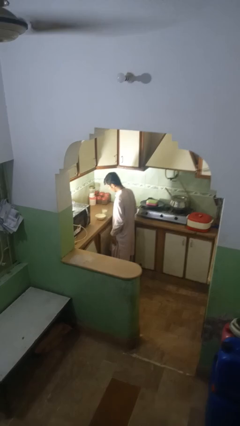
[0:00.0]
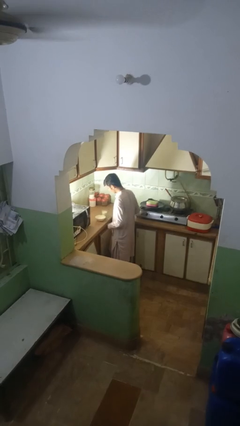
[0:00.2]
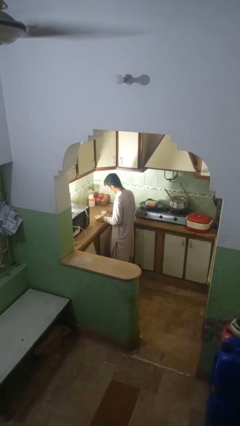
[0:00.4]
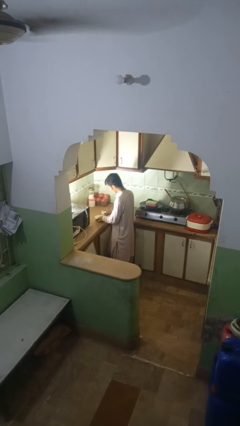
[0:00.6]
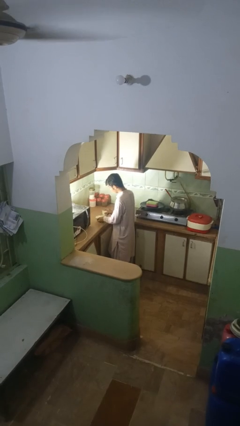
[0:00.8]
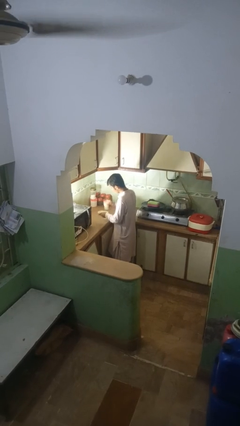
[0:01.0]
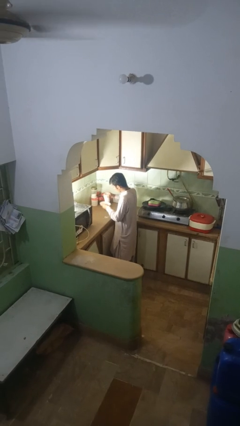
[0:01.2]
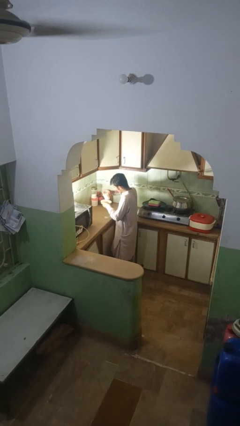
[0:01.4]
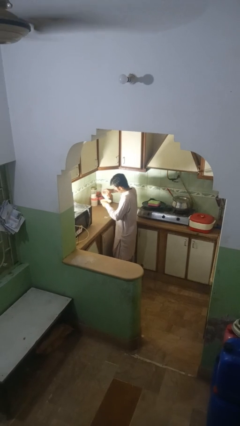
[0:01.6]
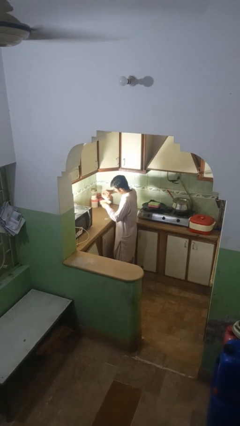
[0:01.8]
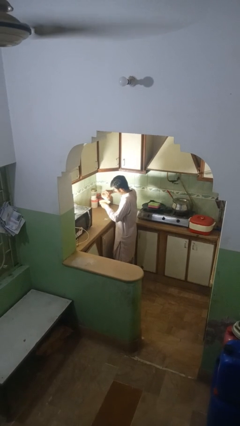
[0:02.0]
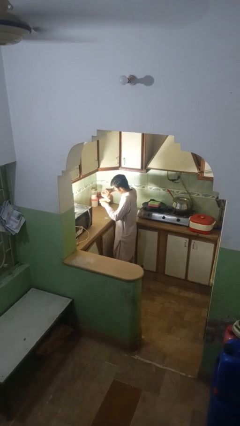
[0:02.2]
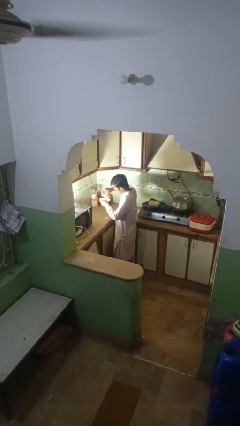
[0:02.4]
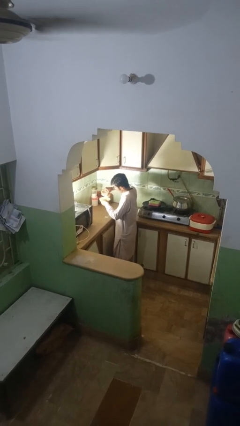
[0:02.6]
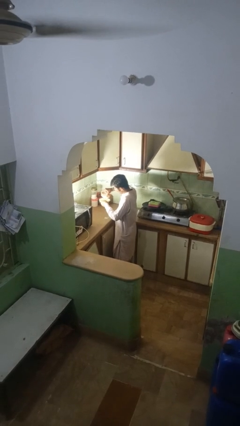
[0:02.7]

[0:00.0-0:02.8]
person pours into bowl

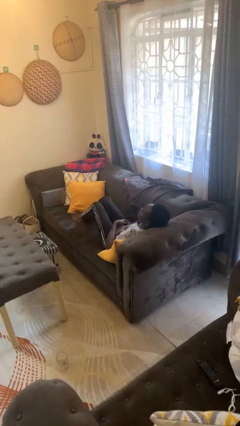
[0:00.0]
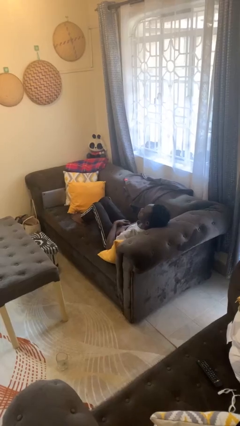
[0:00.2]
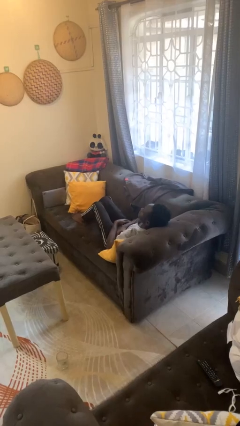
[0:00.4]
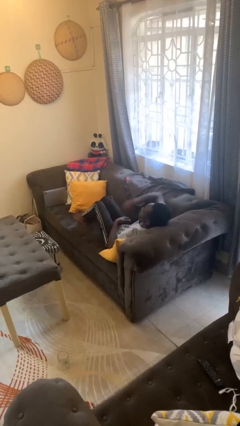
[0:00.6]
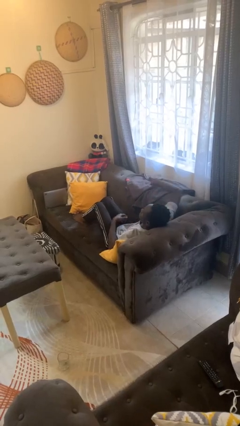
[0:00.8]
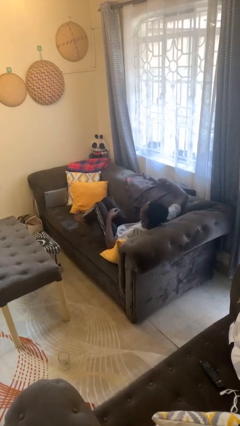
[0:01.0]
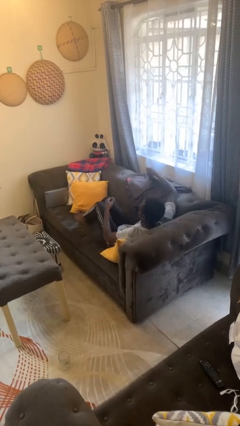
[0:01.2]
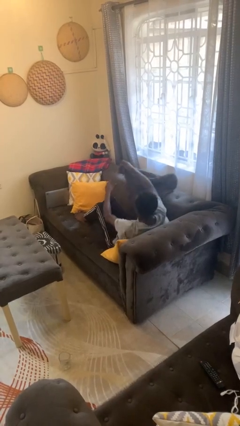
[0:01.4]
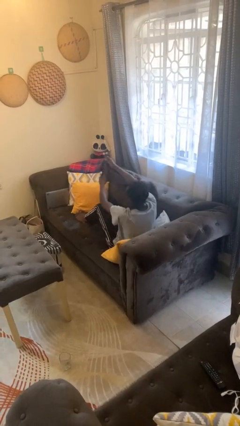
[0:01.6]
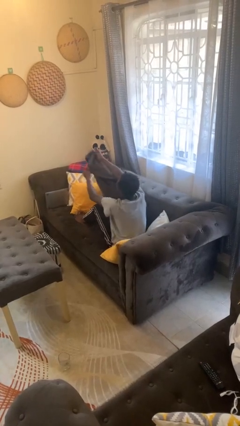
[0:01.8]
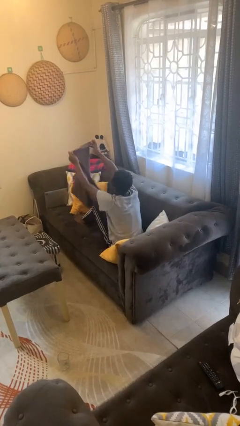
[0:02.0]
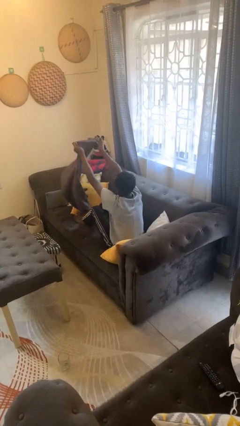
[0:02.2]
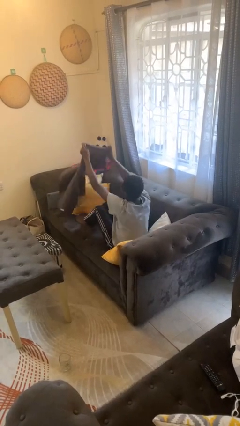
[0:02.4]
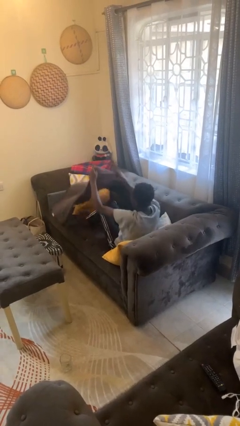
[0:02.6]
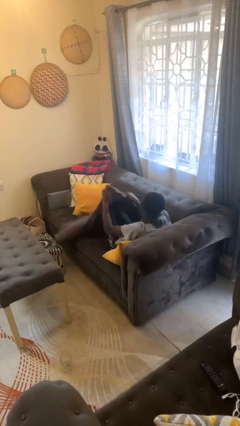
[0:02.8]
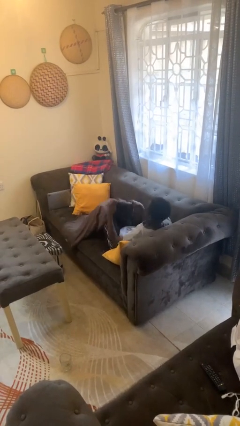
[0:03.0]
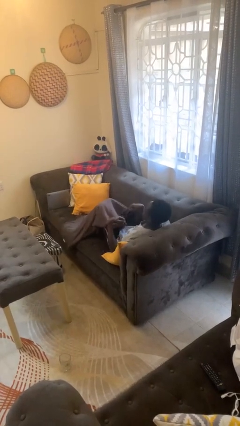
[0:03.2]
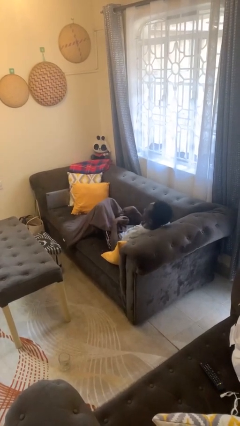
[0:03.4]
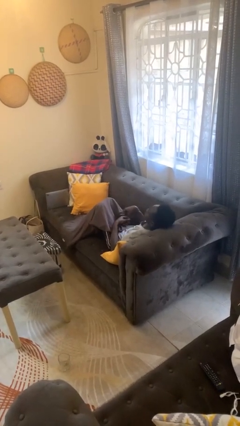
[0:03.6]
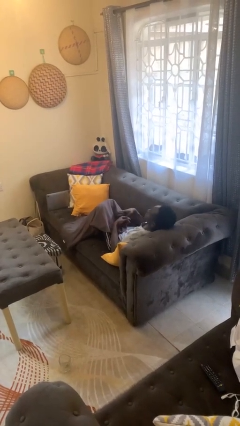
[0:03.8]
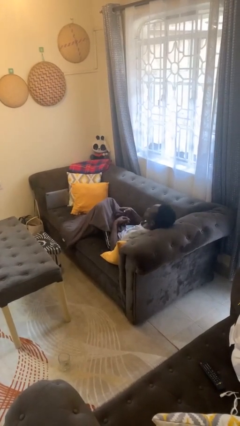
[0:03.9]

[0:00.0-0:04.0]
person covers with blanket

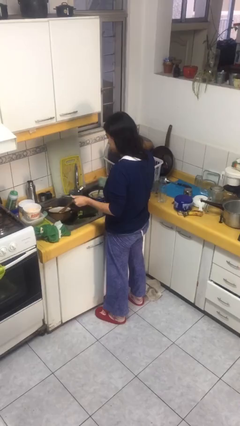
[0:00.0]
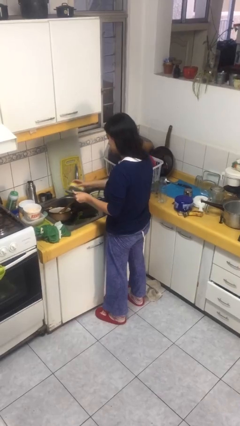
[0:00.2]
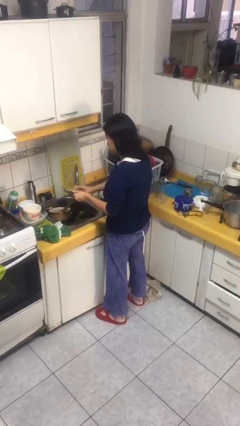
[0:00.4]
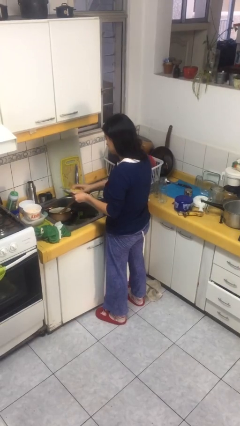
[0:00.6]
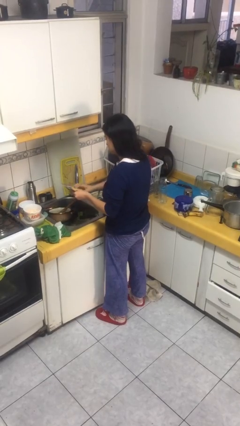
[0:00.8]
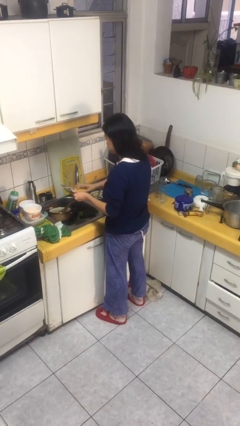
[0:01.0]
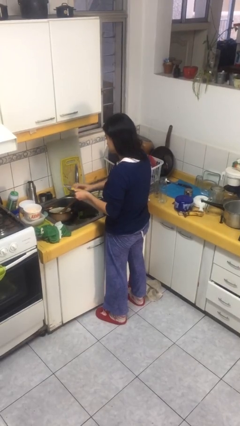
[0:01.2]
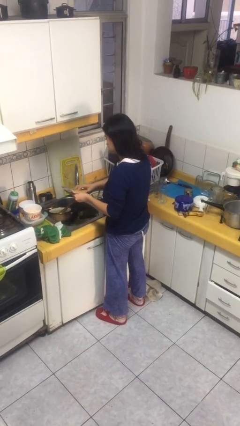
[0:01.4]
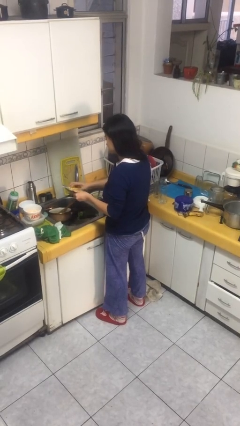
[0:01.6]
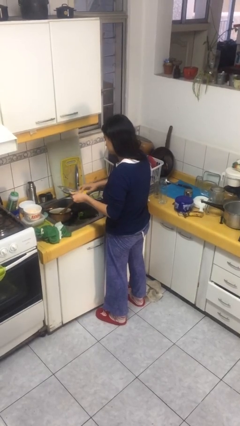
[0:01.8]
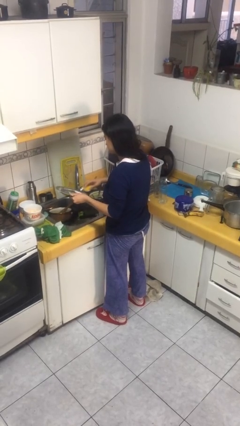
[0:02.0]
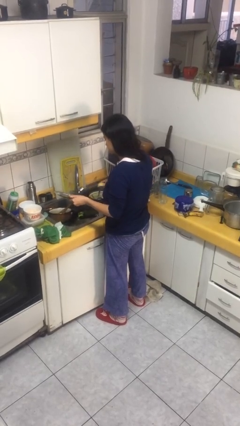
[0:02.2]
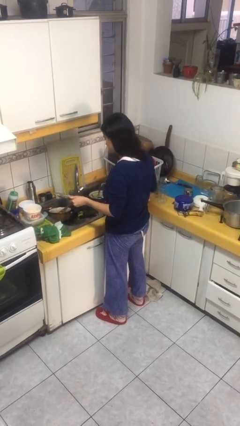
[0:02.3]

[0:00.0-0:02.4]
person washes dish

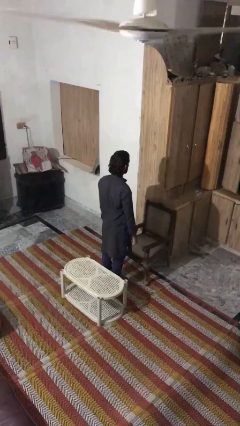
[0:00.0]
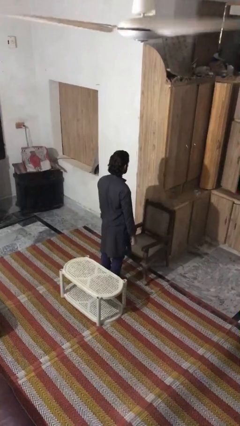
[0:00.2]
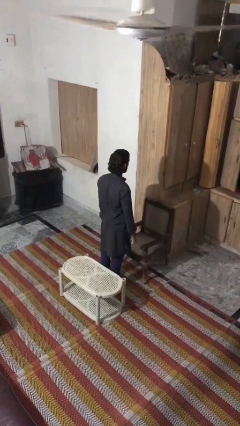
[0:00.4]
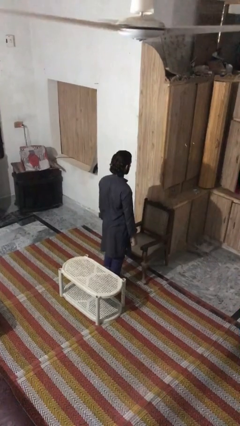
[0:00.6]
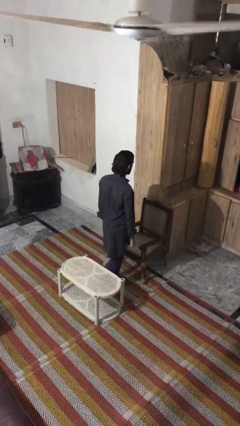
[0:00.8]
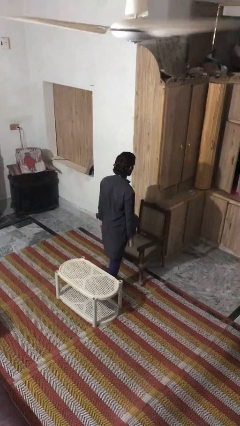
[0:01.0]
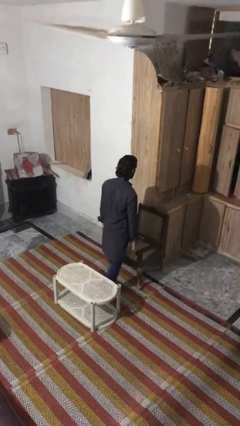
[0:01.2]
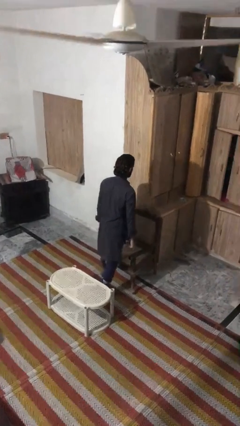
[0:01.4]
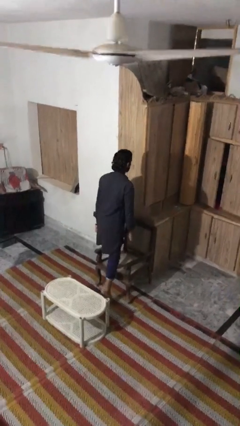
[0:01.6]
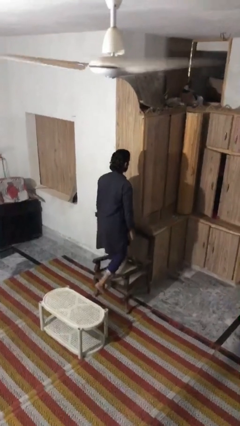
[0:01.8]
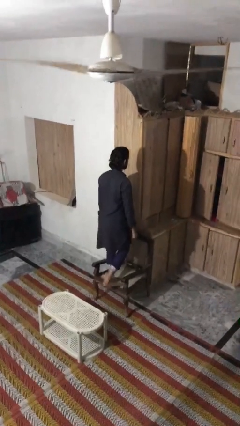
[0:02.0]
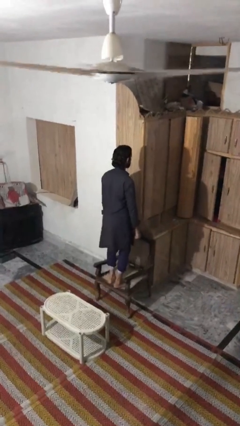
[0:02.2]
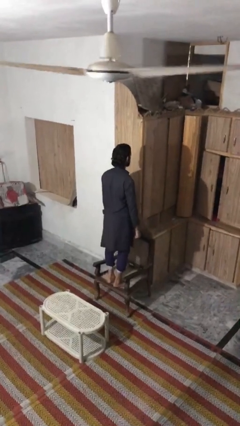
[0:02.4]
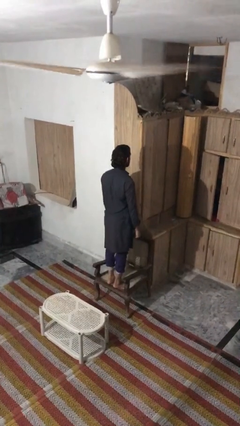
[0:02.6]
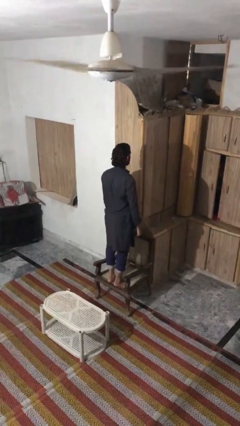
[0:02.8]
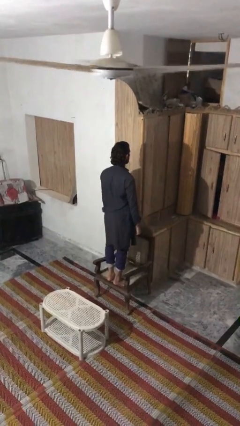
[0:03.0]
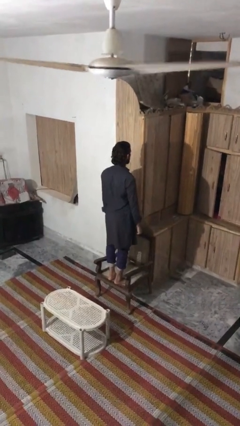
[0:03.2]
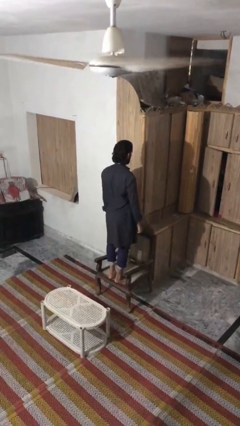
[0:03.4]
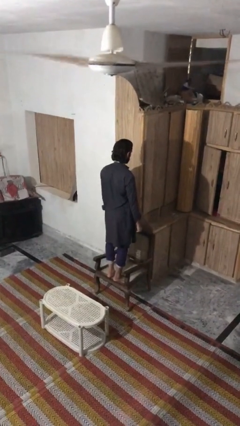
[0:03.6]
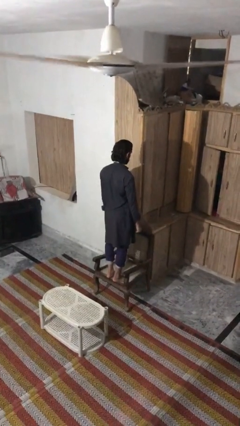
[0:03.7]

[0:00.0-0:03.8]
person climbs on chair

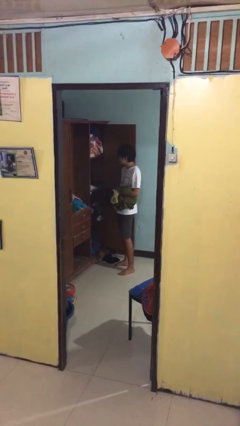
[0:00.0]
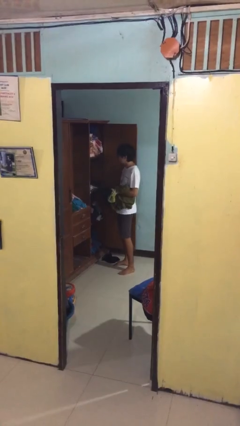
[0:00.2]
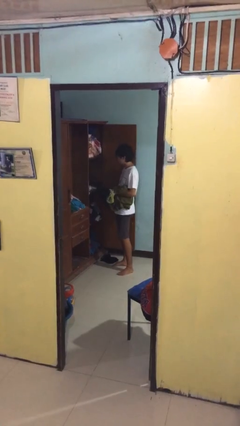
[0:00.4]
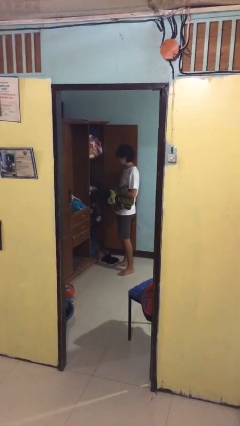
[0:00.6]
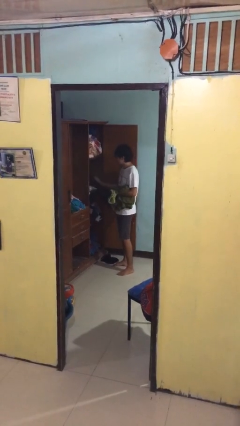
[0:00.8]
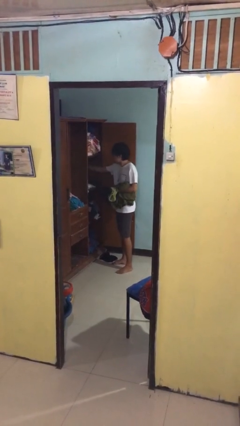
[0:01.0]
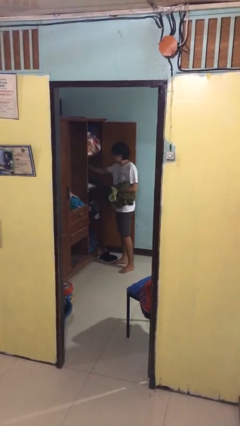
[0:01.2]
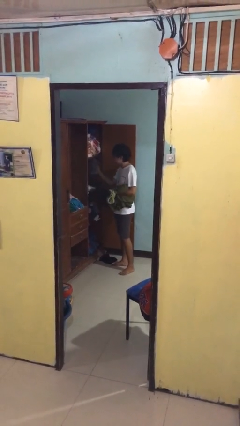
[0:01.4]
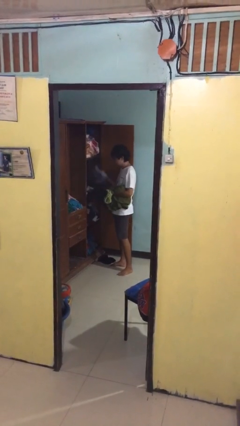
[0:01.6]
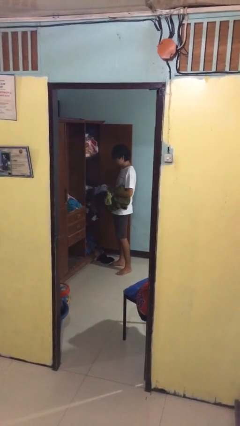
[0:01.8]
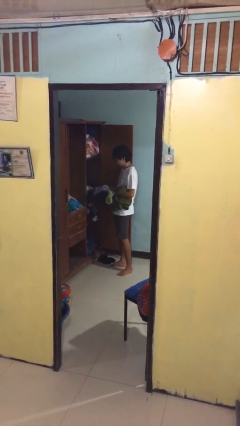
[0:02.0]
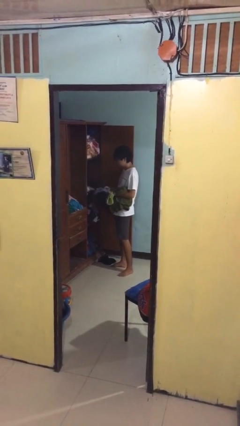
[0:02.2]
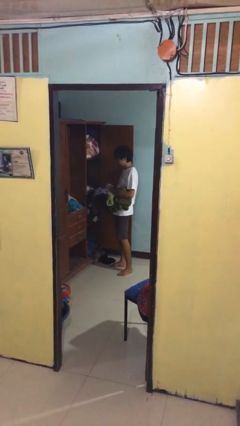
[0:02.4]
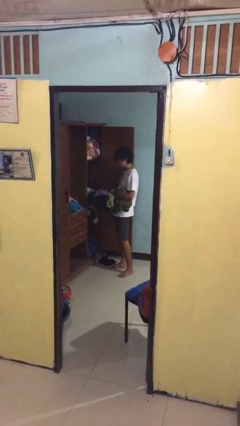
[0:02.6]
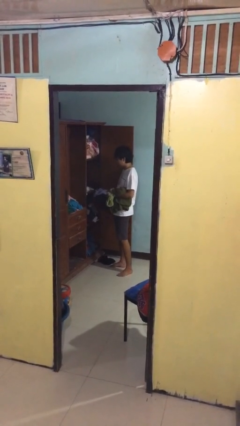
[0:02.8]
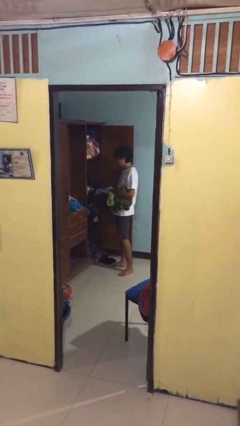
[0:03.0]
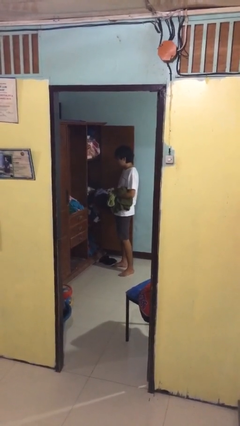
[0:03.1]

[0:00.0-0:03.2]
person takes clothes from dresser

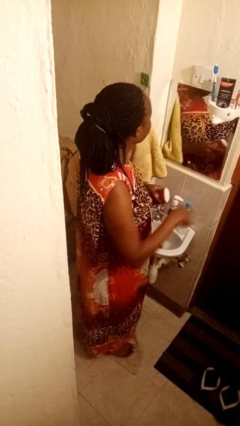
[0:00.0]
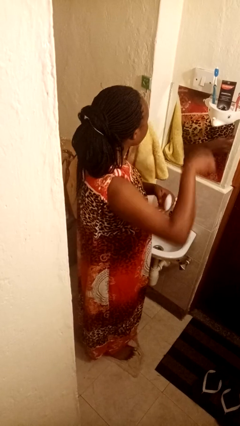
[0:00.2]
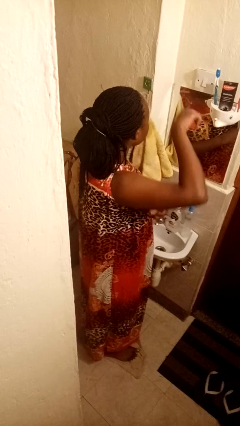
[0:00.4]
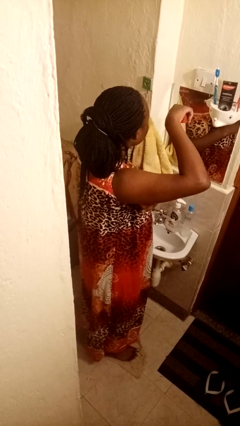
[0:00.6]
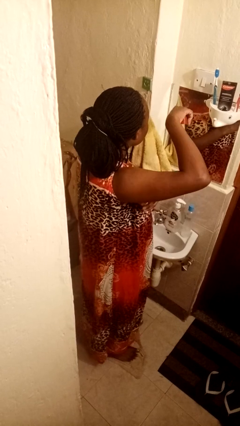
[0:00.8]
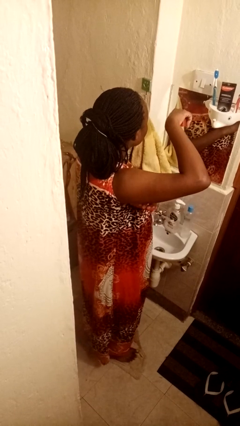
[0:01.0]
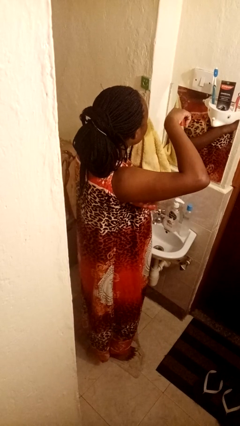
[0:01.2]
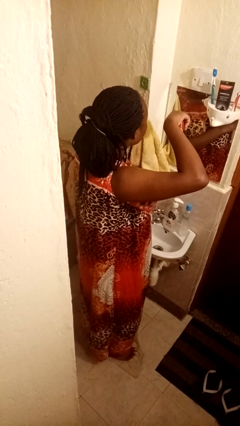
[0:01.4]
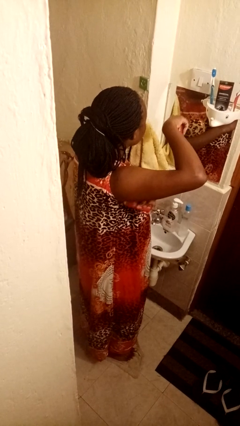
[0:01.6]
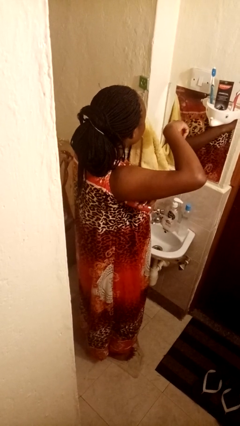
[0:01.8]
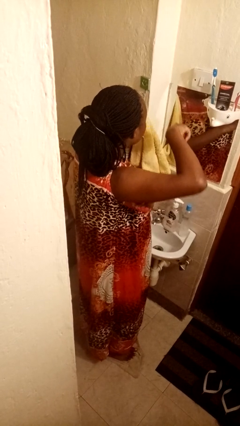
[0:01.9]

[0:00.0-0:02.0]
person applies deodorant
